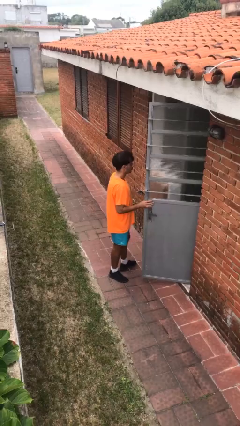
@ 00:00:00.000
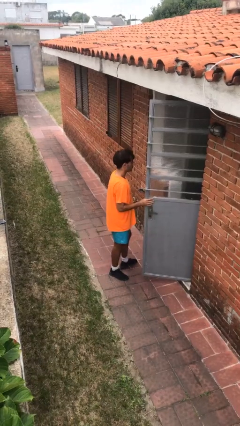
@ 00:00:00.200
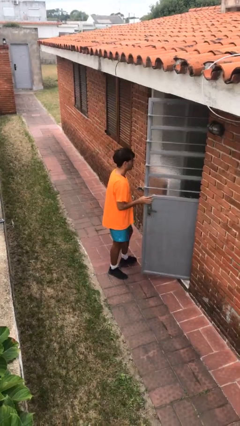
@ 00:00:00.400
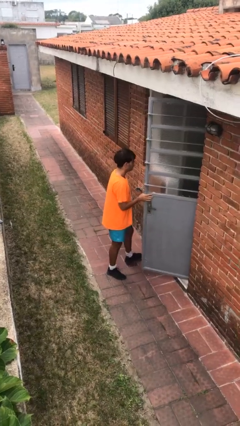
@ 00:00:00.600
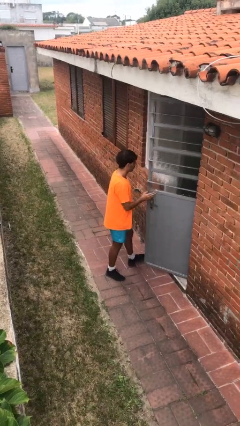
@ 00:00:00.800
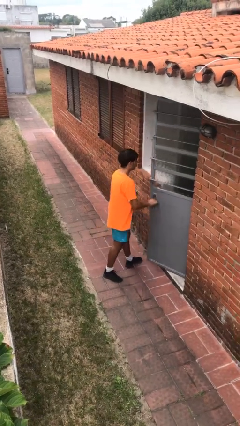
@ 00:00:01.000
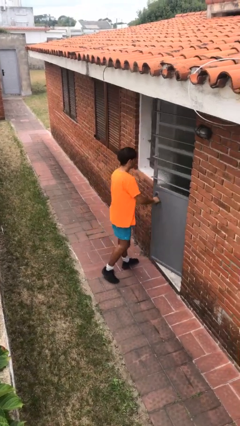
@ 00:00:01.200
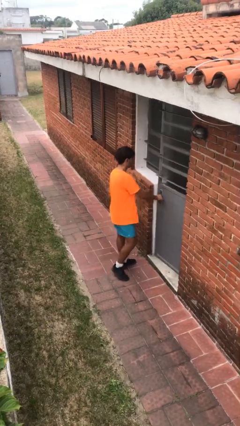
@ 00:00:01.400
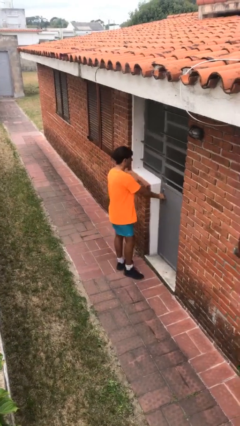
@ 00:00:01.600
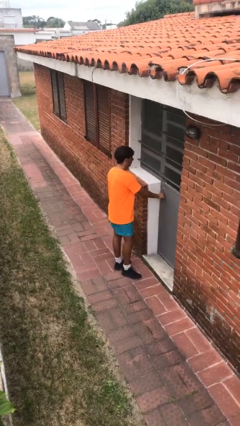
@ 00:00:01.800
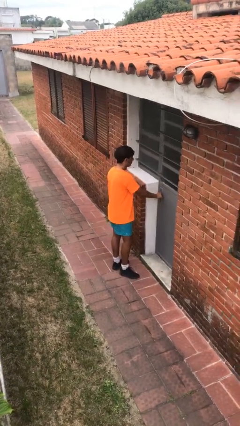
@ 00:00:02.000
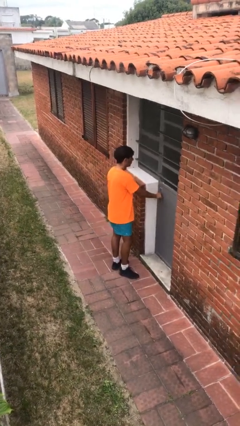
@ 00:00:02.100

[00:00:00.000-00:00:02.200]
person closes facility door

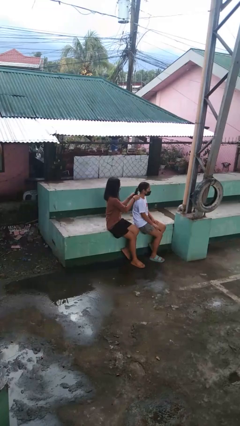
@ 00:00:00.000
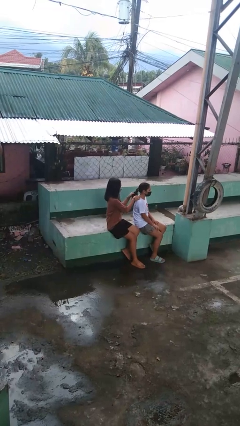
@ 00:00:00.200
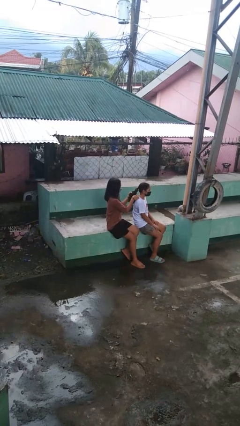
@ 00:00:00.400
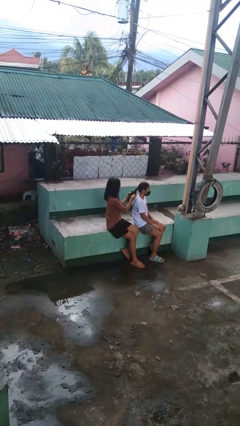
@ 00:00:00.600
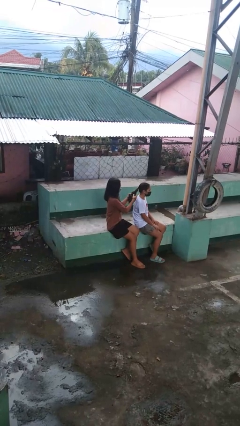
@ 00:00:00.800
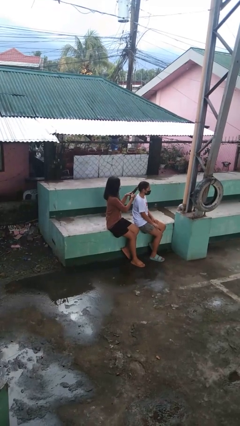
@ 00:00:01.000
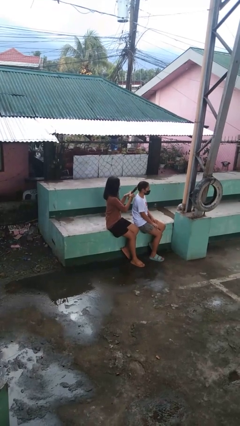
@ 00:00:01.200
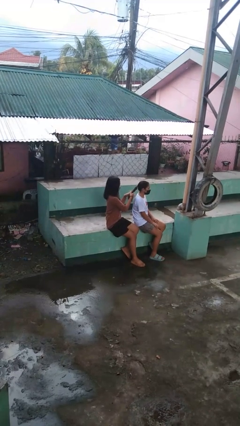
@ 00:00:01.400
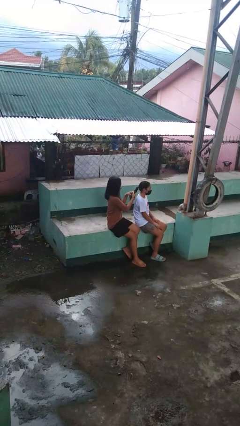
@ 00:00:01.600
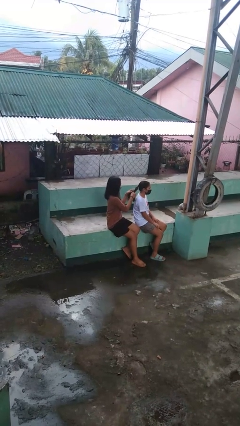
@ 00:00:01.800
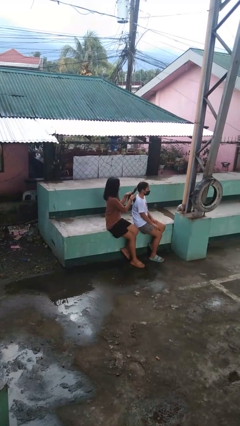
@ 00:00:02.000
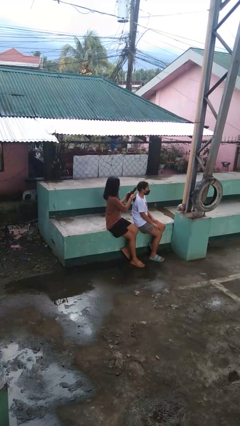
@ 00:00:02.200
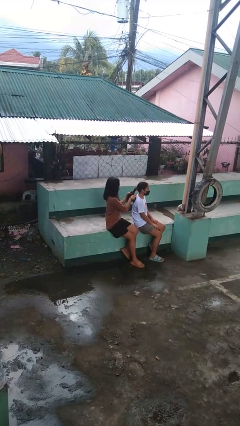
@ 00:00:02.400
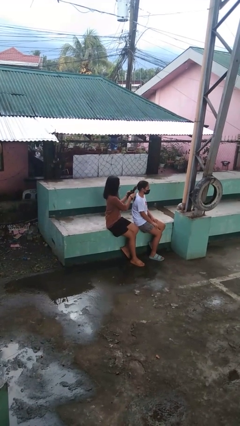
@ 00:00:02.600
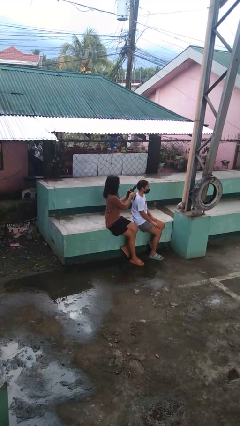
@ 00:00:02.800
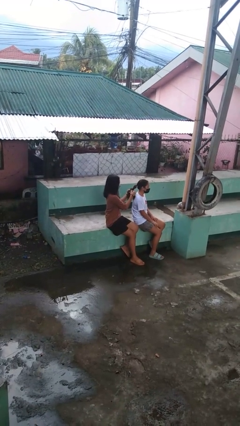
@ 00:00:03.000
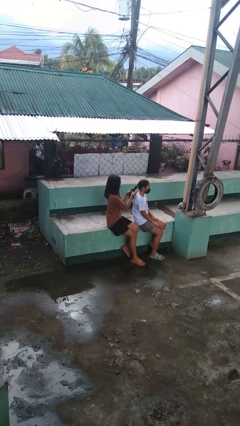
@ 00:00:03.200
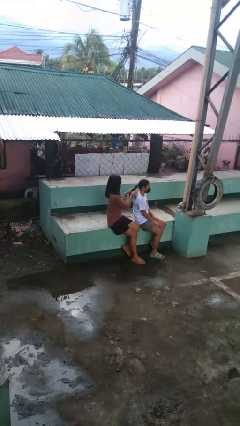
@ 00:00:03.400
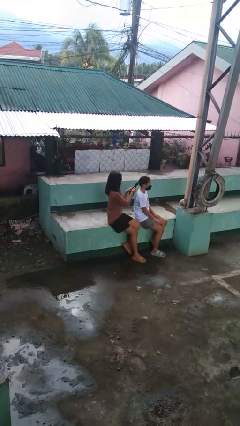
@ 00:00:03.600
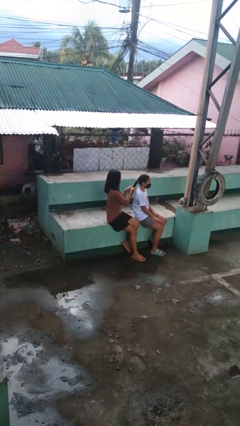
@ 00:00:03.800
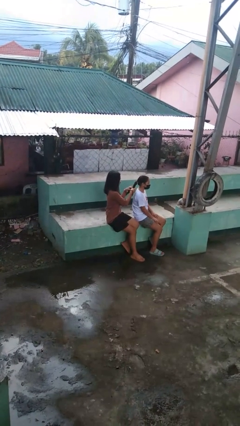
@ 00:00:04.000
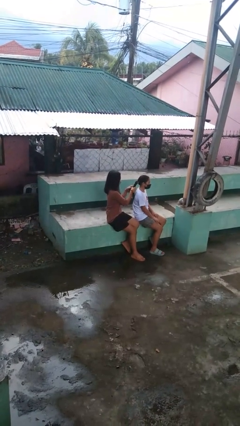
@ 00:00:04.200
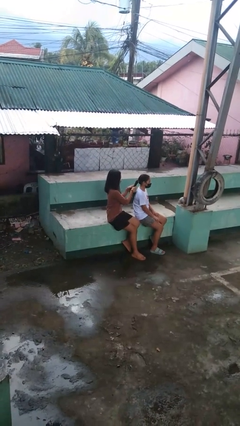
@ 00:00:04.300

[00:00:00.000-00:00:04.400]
person braids hair of person

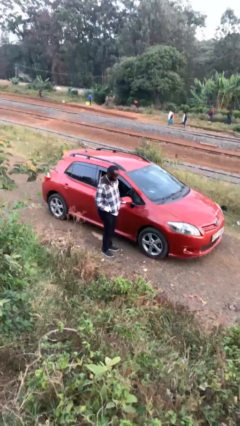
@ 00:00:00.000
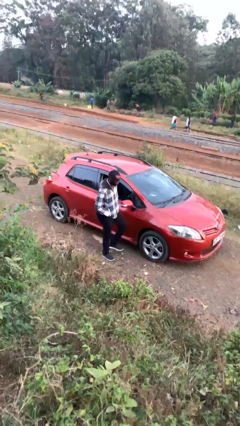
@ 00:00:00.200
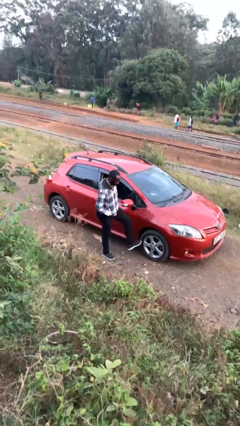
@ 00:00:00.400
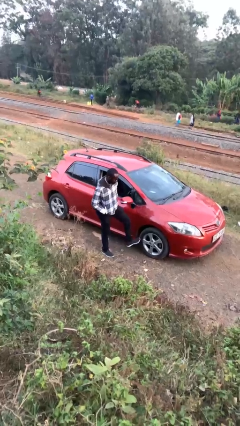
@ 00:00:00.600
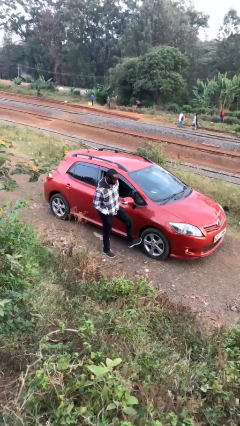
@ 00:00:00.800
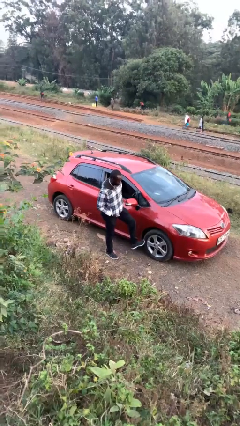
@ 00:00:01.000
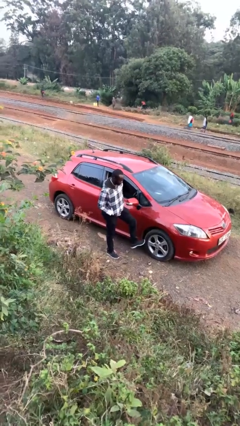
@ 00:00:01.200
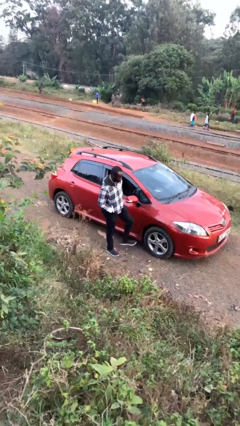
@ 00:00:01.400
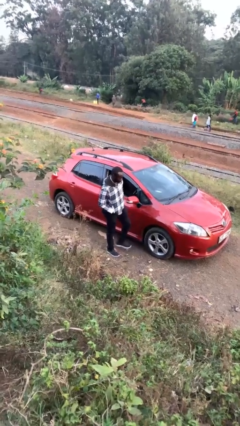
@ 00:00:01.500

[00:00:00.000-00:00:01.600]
person kicks car tires

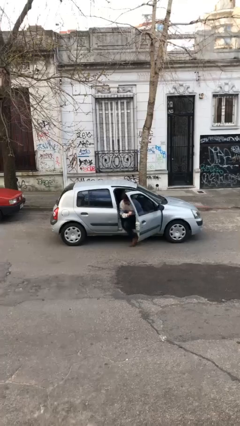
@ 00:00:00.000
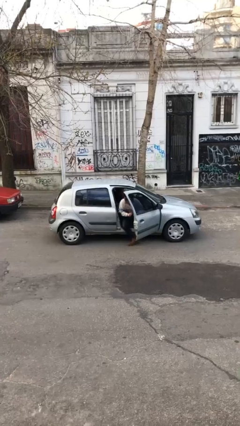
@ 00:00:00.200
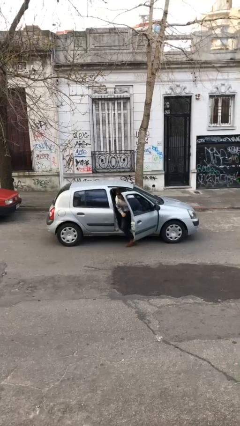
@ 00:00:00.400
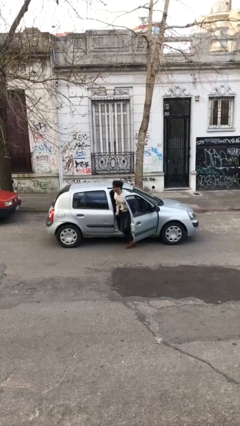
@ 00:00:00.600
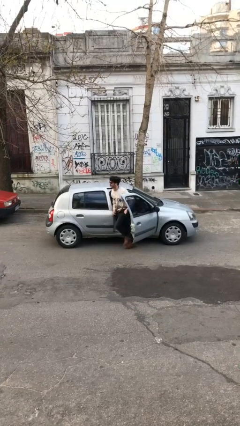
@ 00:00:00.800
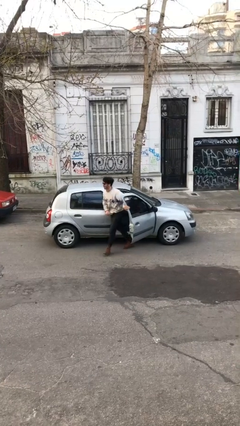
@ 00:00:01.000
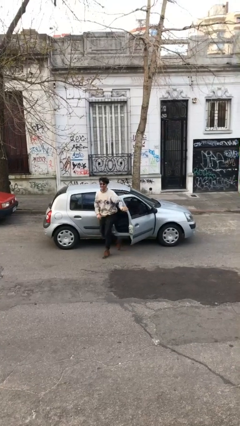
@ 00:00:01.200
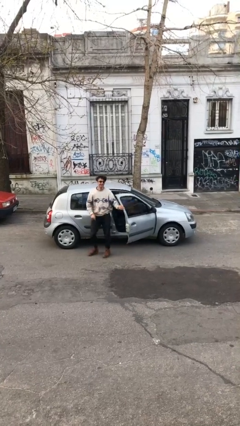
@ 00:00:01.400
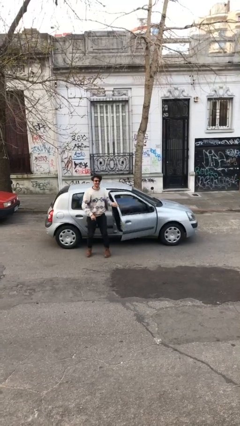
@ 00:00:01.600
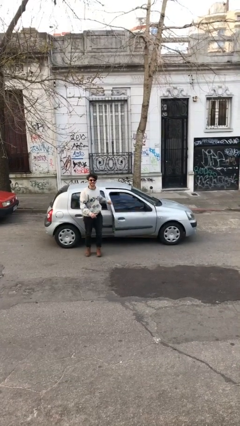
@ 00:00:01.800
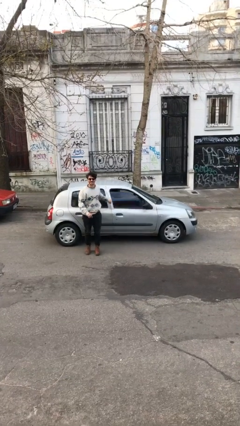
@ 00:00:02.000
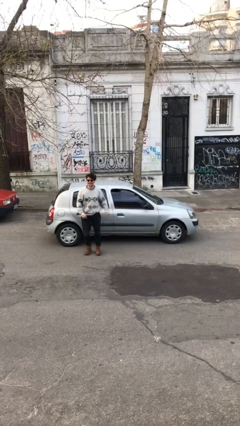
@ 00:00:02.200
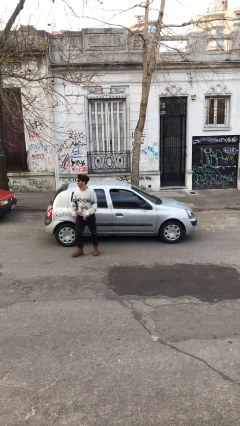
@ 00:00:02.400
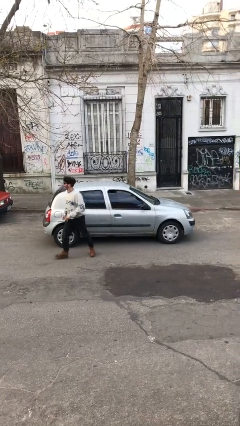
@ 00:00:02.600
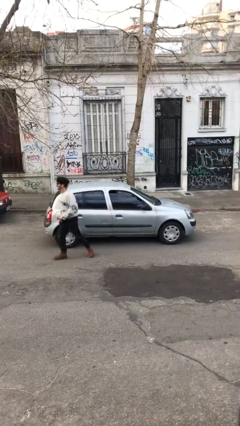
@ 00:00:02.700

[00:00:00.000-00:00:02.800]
car drops off person

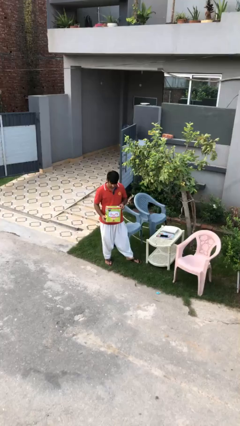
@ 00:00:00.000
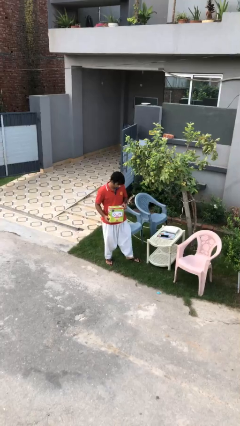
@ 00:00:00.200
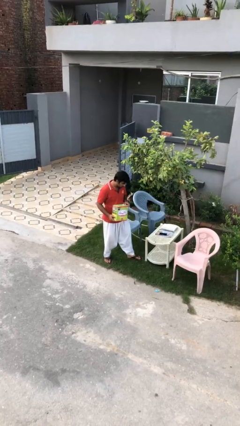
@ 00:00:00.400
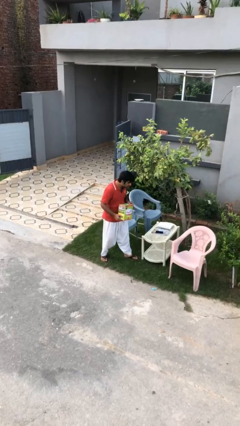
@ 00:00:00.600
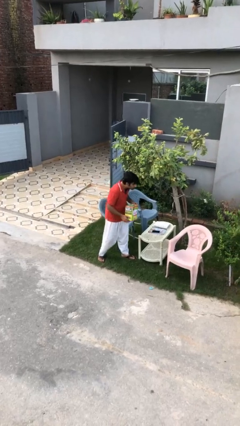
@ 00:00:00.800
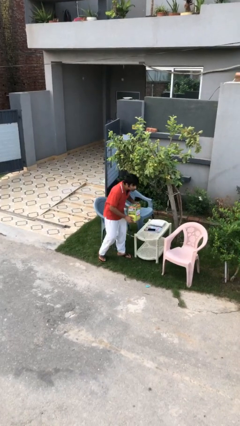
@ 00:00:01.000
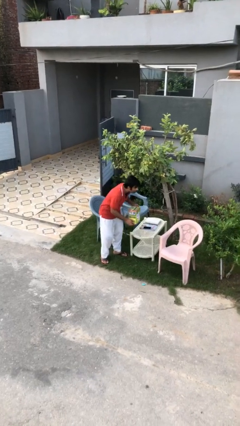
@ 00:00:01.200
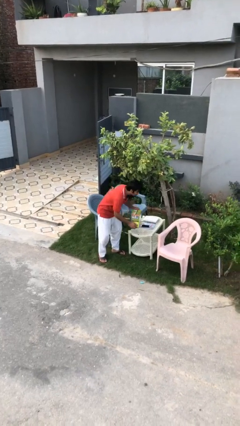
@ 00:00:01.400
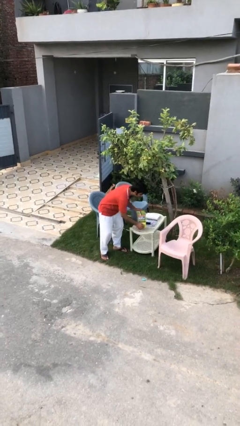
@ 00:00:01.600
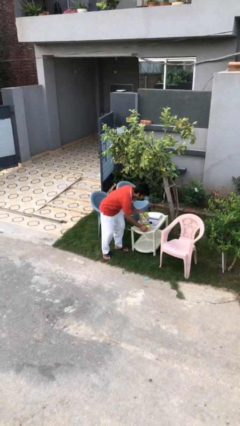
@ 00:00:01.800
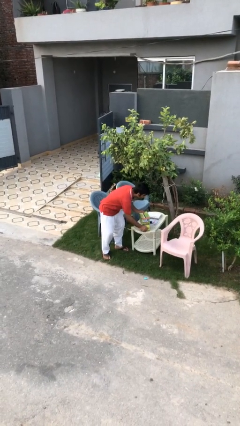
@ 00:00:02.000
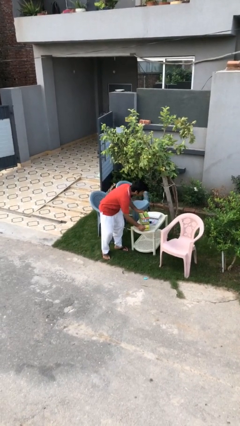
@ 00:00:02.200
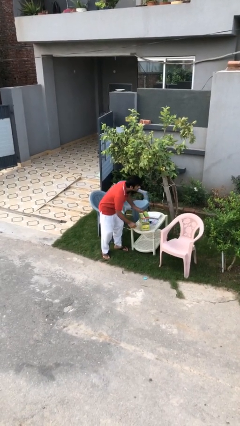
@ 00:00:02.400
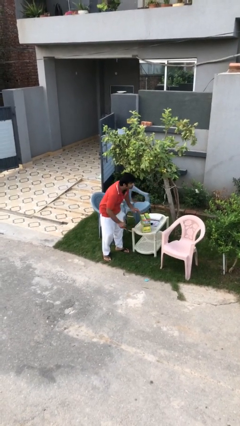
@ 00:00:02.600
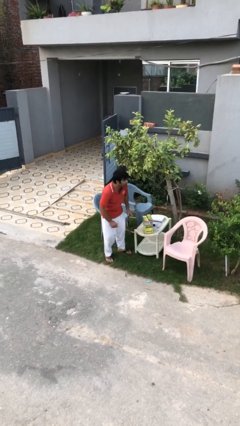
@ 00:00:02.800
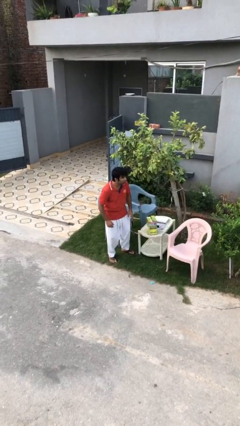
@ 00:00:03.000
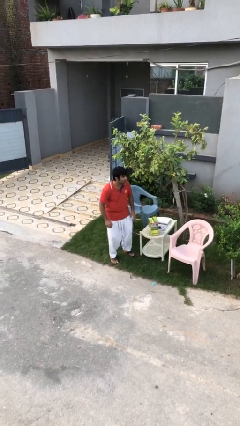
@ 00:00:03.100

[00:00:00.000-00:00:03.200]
person puts down object on table

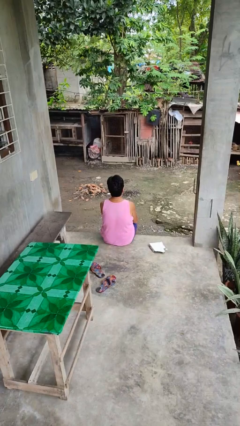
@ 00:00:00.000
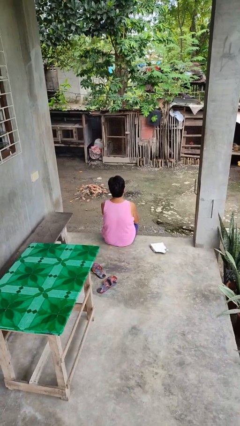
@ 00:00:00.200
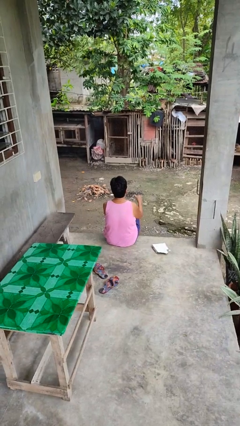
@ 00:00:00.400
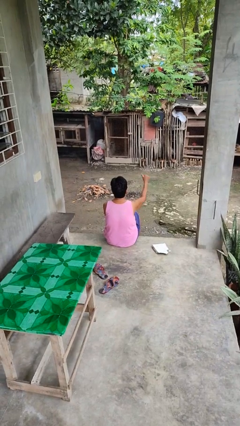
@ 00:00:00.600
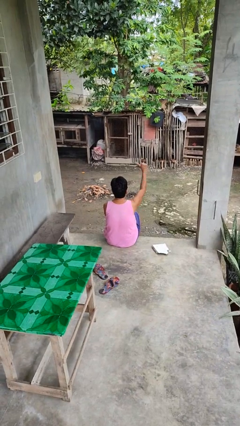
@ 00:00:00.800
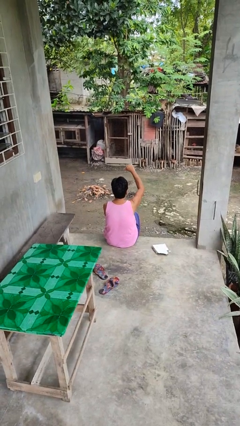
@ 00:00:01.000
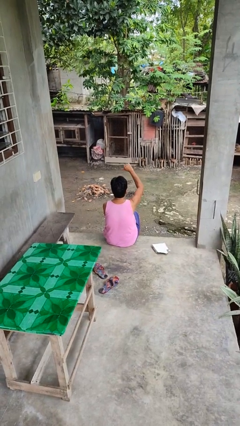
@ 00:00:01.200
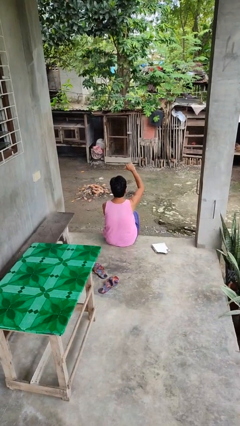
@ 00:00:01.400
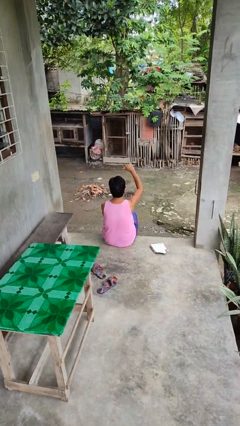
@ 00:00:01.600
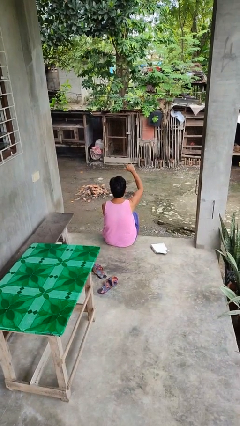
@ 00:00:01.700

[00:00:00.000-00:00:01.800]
person gestures thumbs down

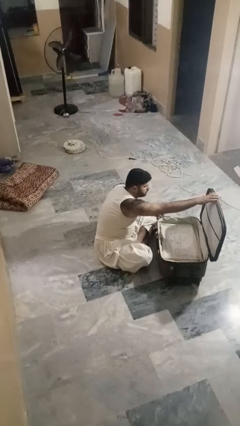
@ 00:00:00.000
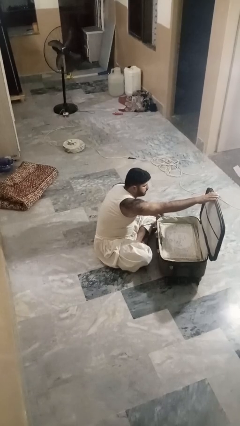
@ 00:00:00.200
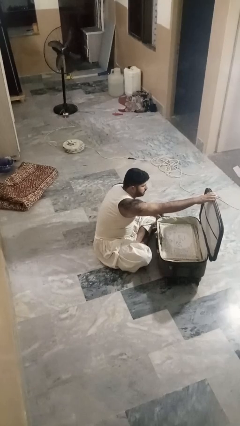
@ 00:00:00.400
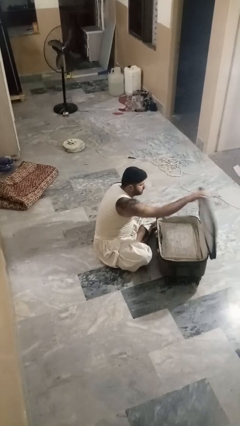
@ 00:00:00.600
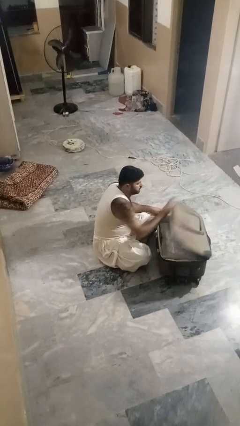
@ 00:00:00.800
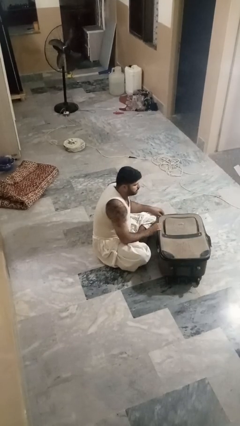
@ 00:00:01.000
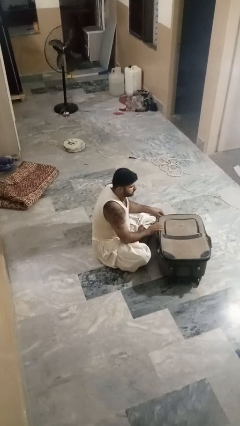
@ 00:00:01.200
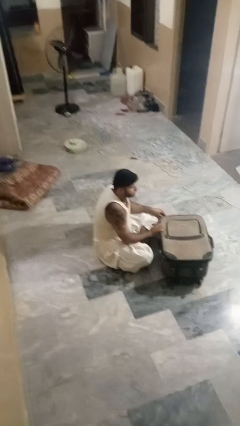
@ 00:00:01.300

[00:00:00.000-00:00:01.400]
person closes suitcase
